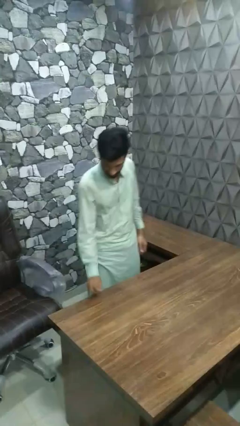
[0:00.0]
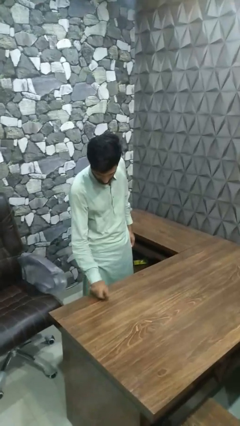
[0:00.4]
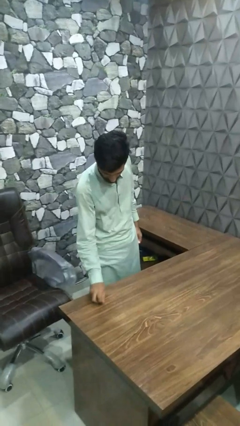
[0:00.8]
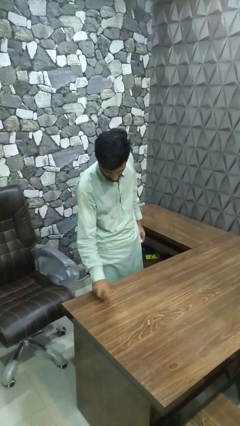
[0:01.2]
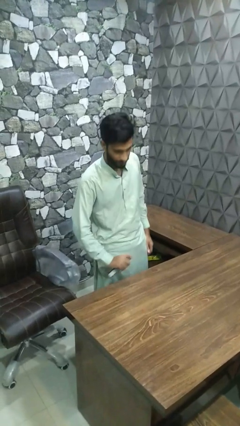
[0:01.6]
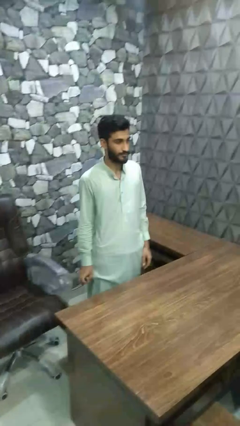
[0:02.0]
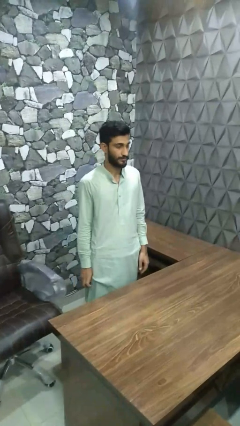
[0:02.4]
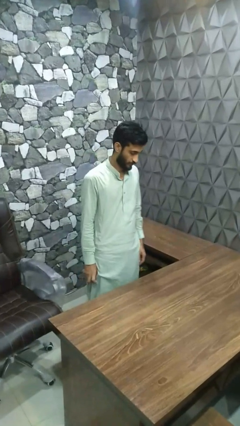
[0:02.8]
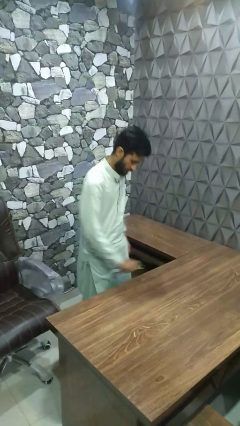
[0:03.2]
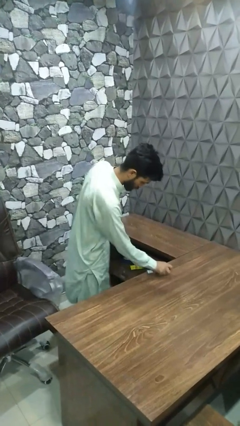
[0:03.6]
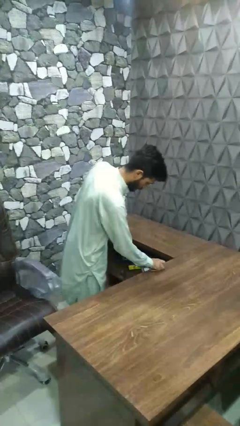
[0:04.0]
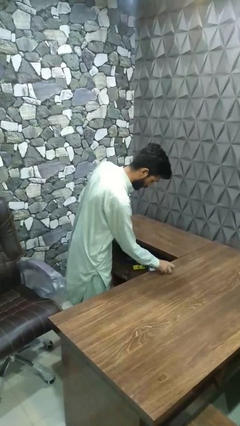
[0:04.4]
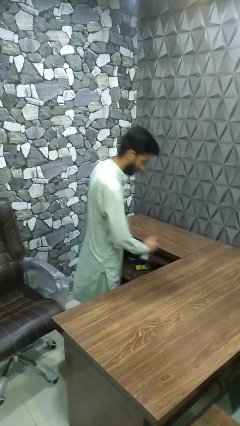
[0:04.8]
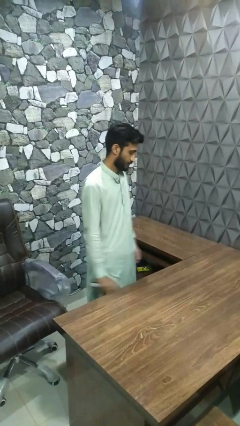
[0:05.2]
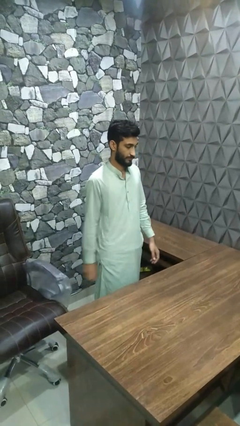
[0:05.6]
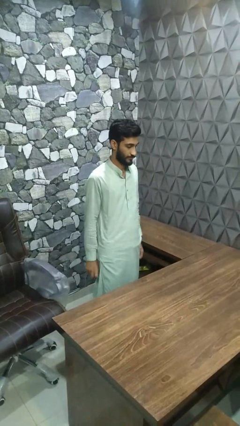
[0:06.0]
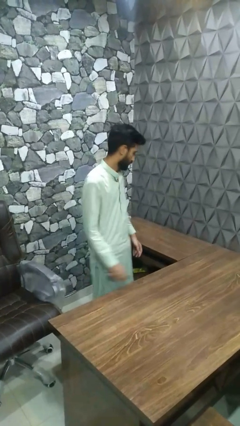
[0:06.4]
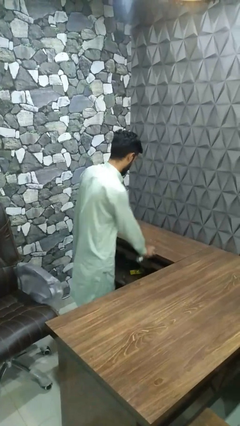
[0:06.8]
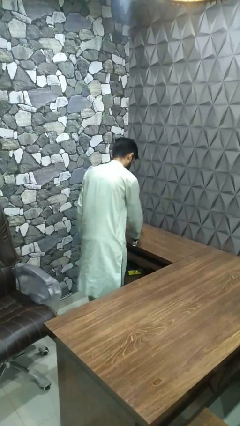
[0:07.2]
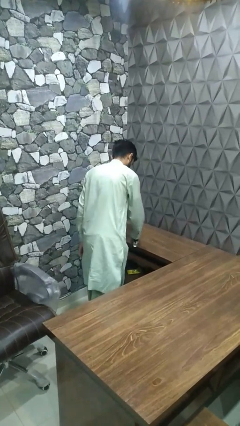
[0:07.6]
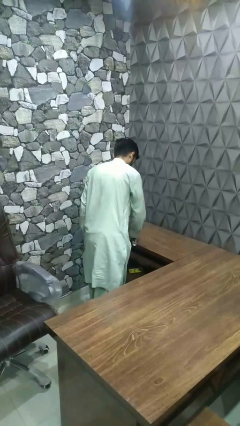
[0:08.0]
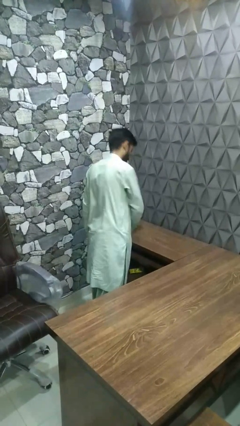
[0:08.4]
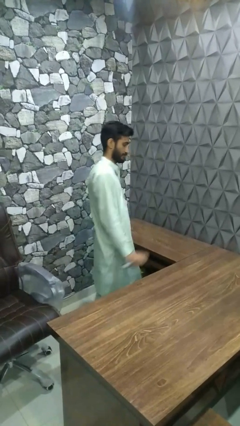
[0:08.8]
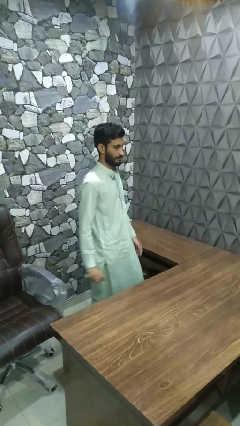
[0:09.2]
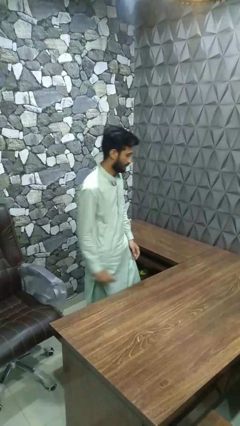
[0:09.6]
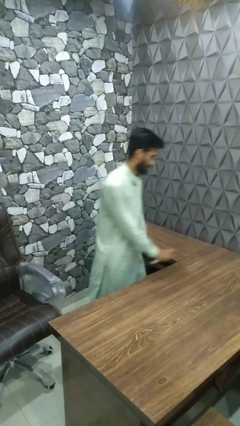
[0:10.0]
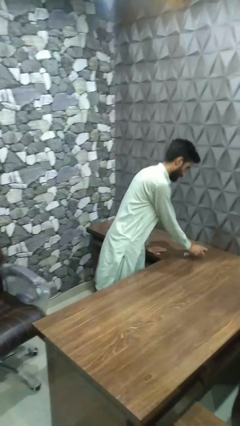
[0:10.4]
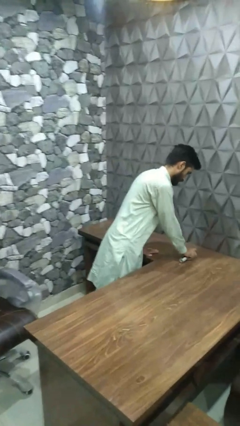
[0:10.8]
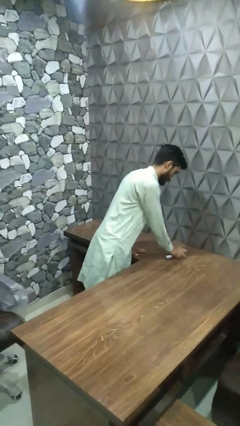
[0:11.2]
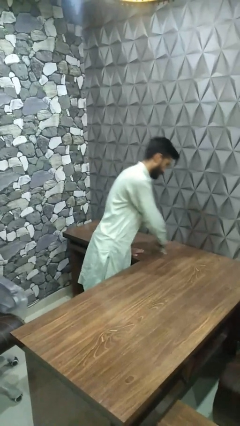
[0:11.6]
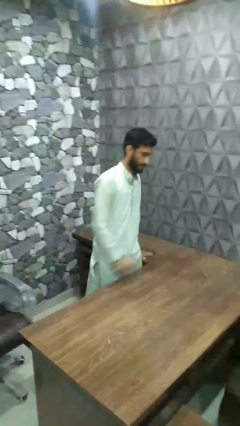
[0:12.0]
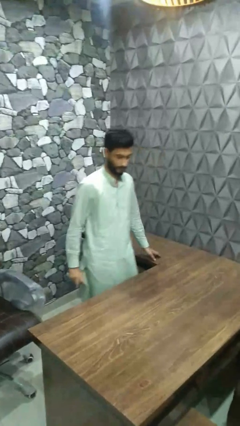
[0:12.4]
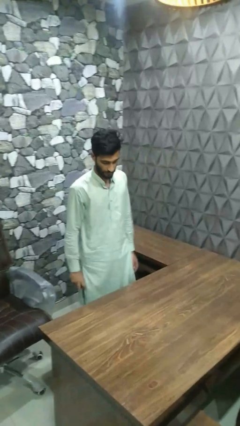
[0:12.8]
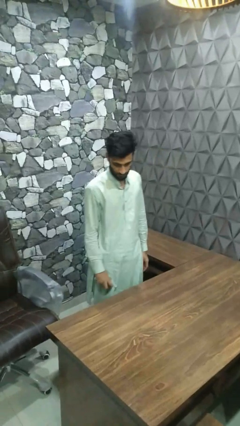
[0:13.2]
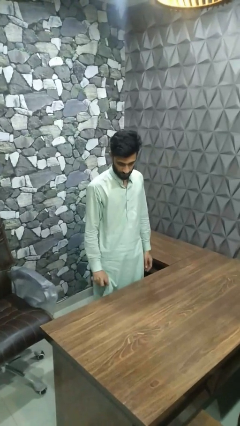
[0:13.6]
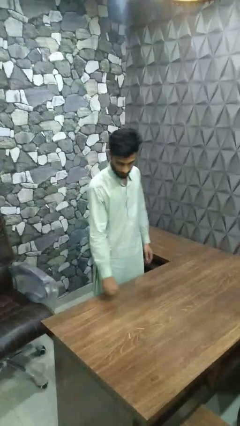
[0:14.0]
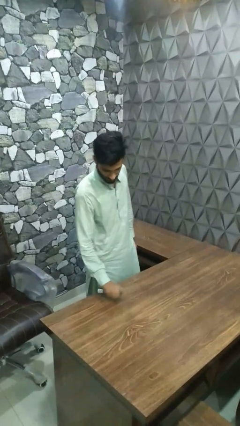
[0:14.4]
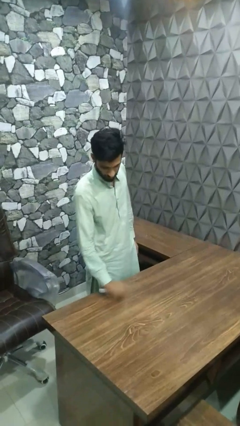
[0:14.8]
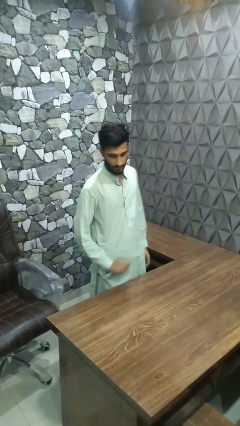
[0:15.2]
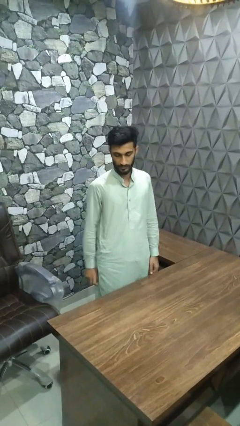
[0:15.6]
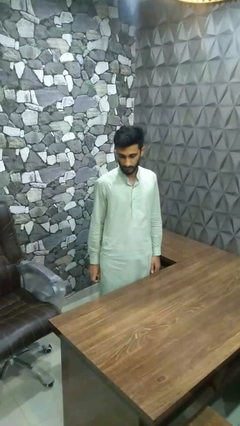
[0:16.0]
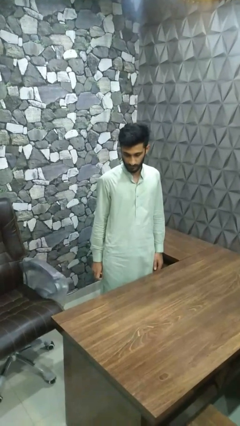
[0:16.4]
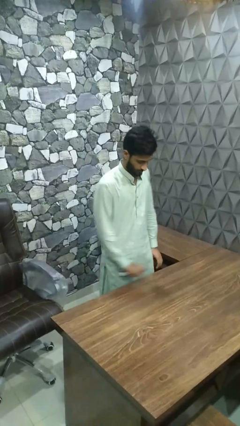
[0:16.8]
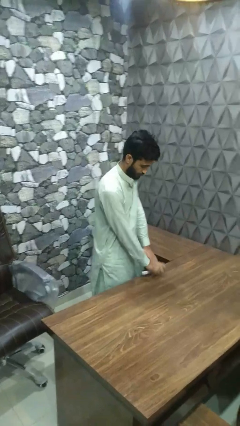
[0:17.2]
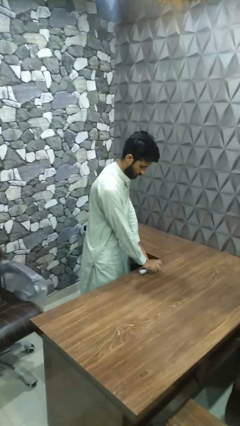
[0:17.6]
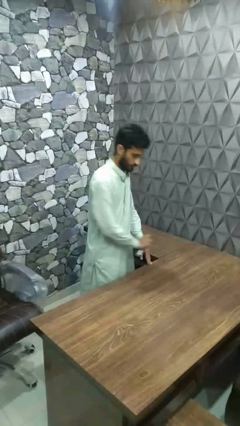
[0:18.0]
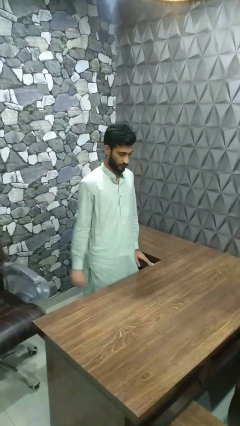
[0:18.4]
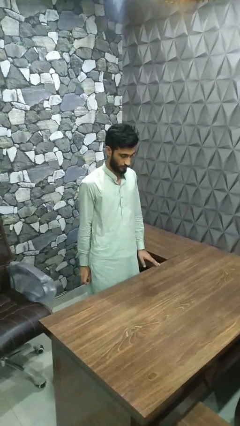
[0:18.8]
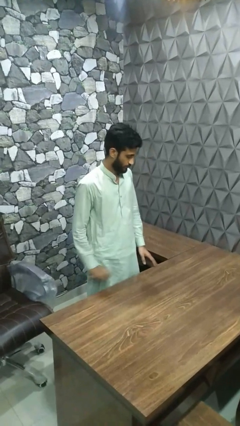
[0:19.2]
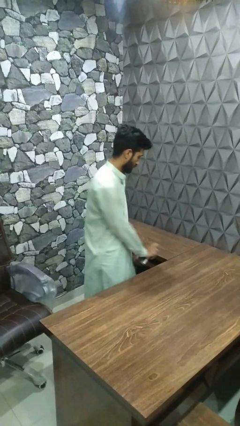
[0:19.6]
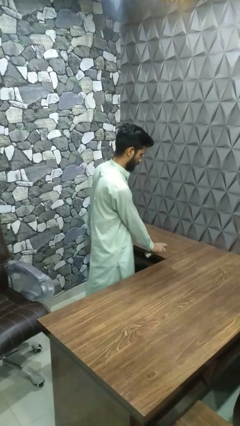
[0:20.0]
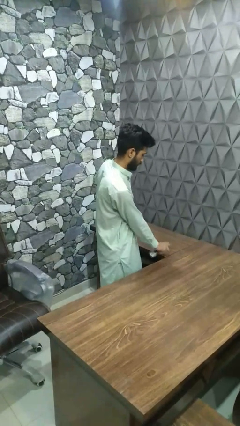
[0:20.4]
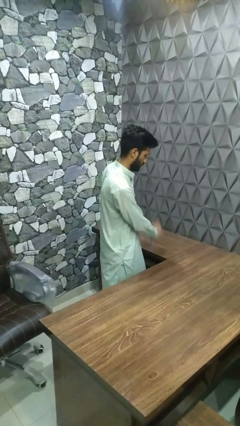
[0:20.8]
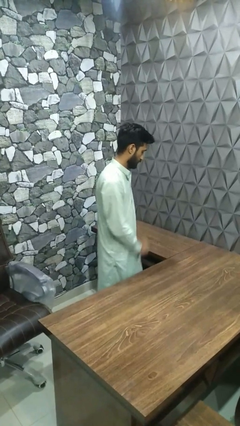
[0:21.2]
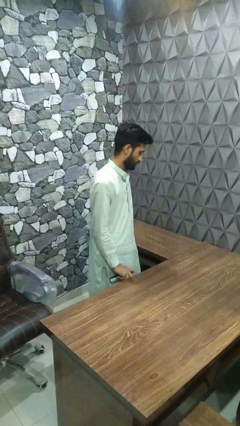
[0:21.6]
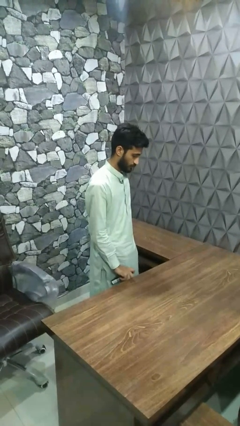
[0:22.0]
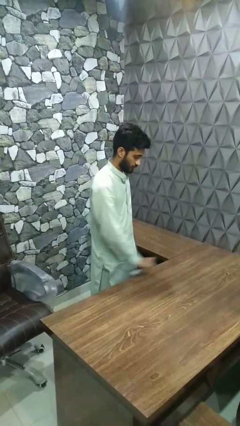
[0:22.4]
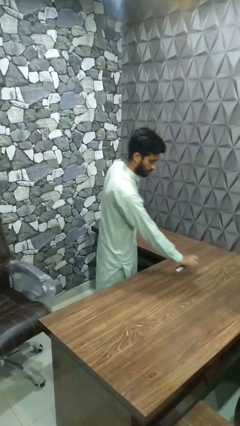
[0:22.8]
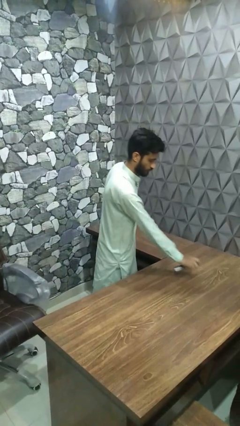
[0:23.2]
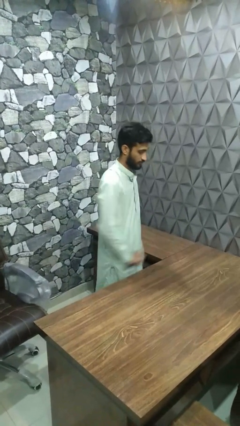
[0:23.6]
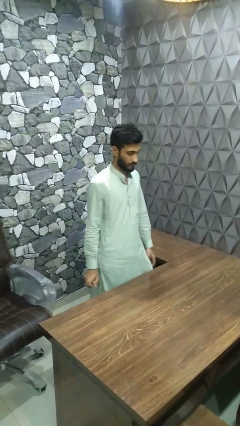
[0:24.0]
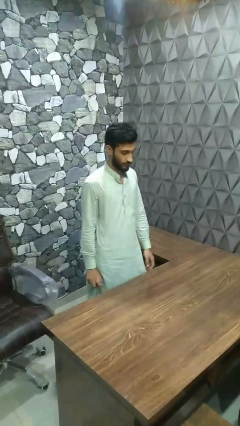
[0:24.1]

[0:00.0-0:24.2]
person sprays from bottle

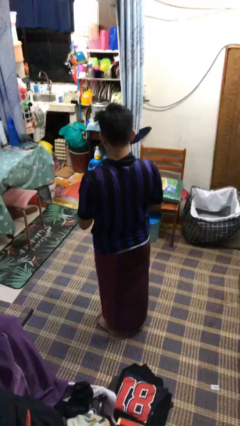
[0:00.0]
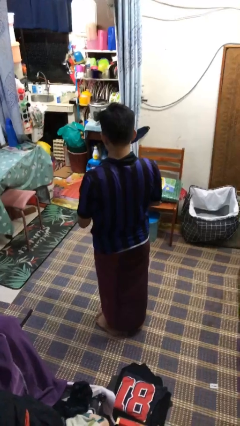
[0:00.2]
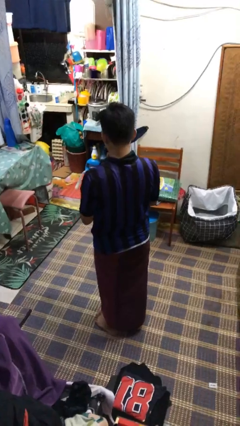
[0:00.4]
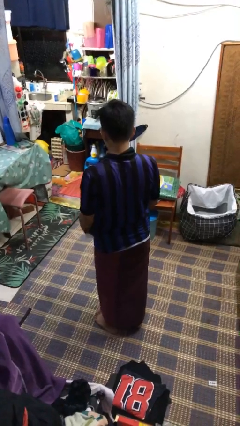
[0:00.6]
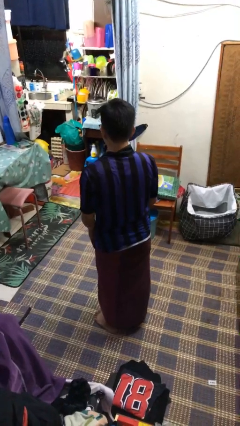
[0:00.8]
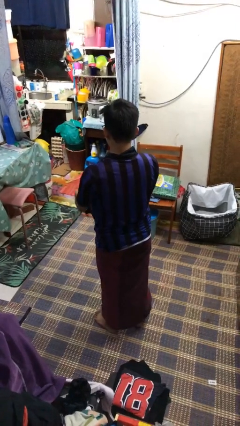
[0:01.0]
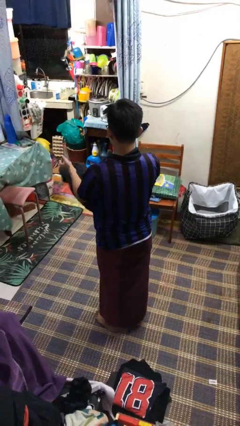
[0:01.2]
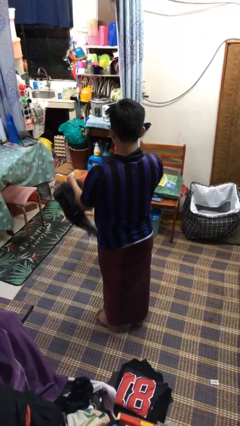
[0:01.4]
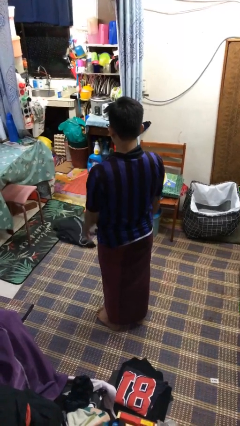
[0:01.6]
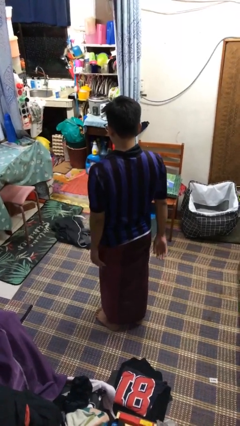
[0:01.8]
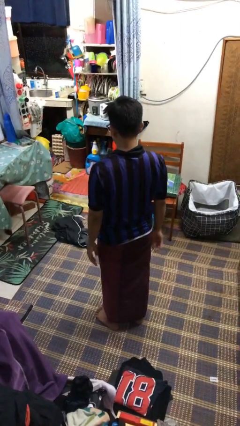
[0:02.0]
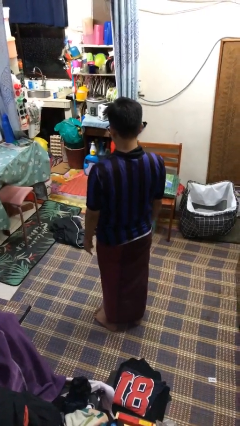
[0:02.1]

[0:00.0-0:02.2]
person throws object to ground

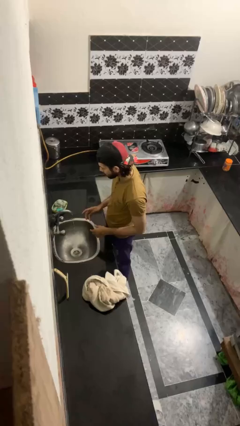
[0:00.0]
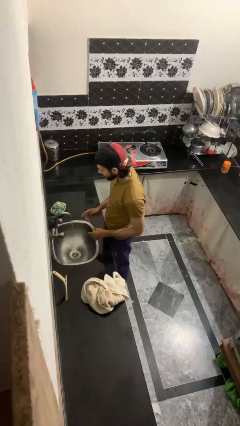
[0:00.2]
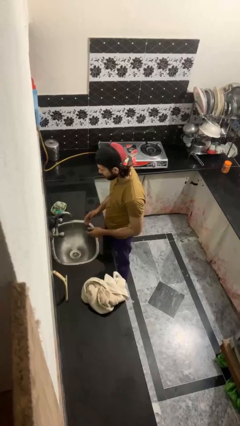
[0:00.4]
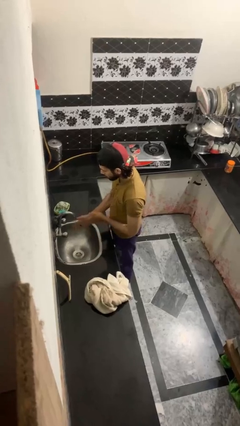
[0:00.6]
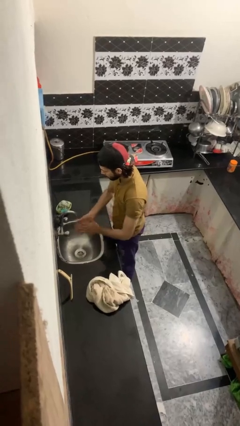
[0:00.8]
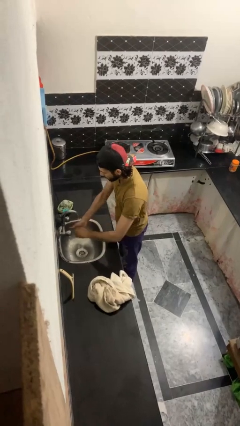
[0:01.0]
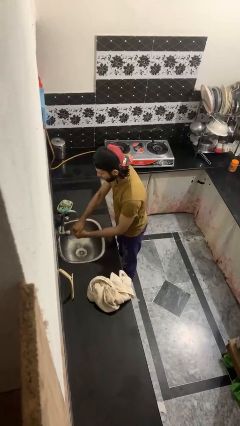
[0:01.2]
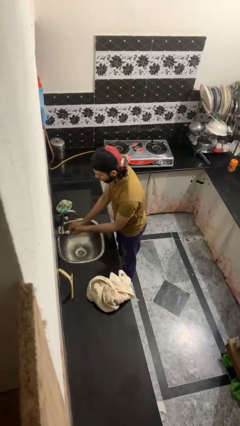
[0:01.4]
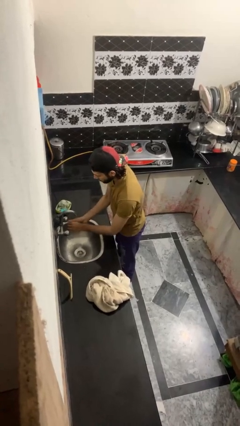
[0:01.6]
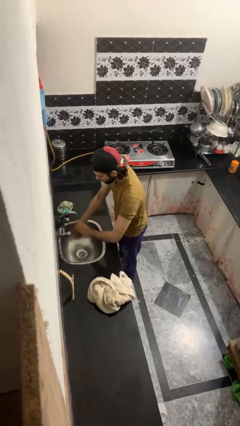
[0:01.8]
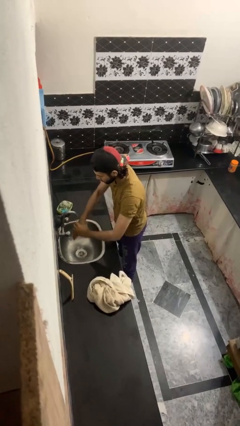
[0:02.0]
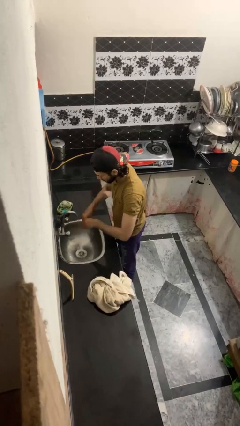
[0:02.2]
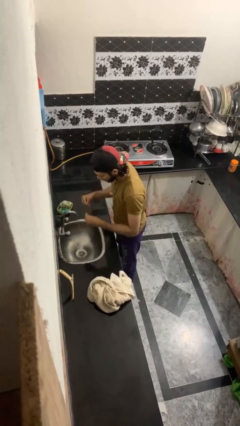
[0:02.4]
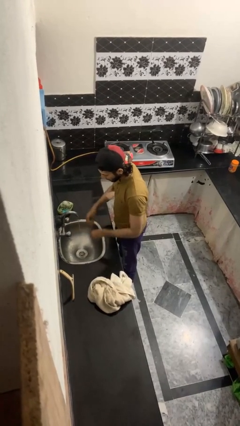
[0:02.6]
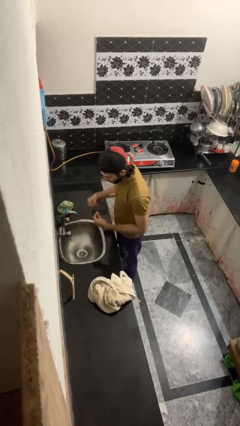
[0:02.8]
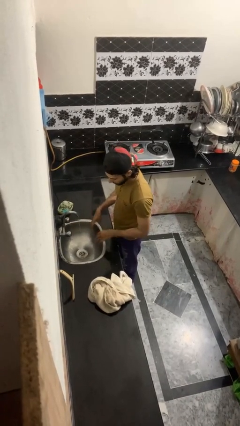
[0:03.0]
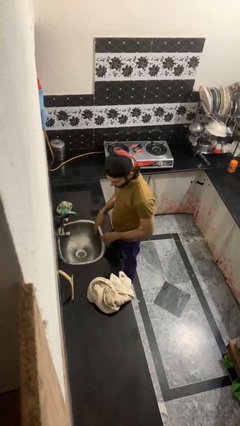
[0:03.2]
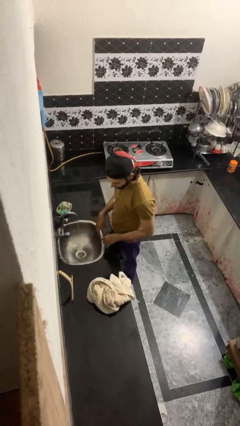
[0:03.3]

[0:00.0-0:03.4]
person washes hands

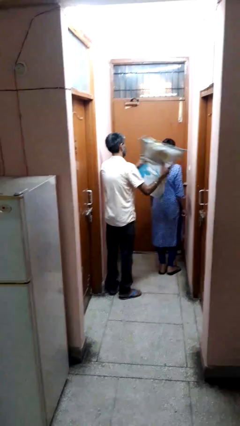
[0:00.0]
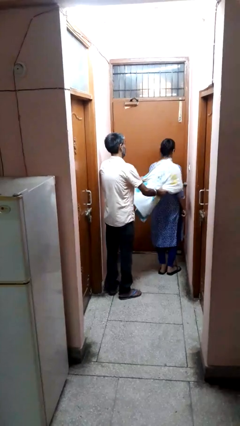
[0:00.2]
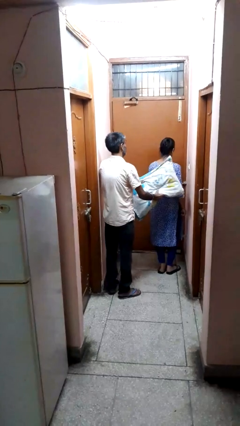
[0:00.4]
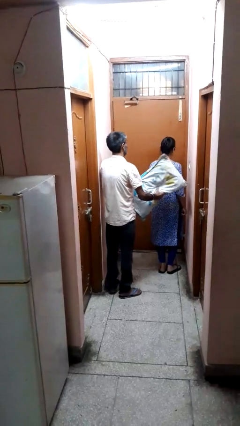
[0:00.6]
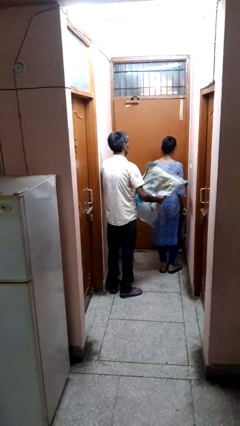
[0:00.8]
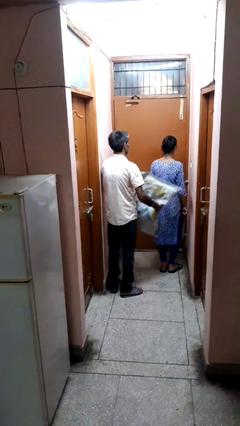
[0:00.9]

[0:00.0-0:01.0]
person hits person with pillow
